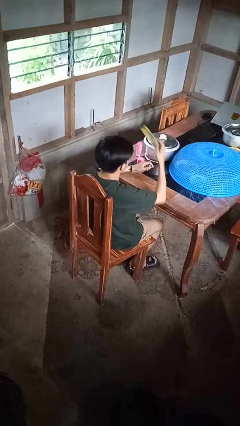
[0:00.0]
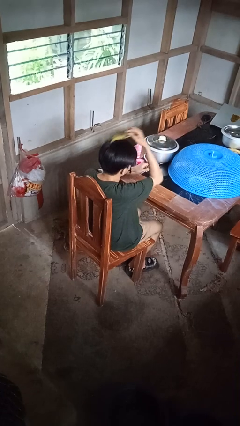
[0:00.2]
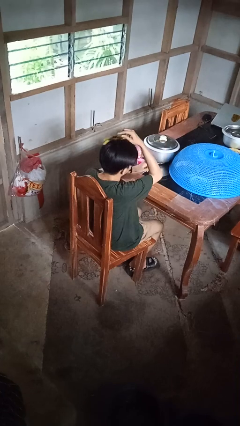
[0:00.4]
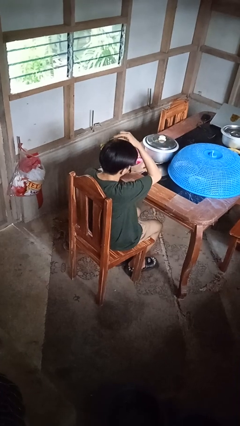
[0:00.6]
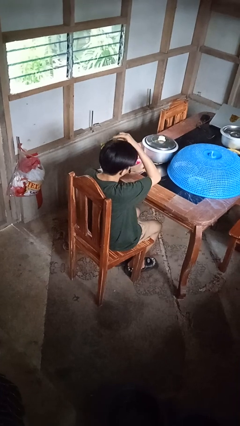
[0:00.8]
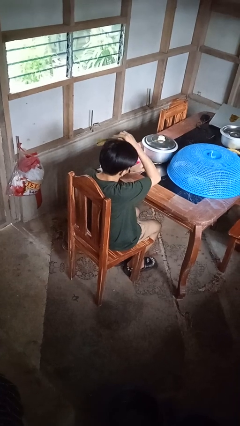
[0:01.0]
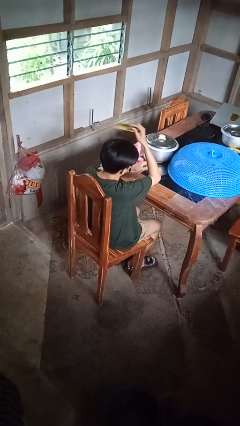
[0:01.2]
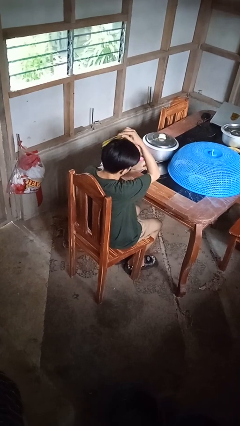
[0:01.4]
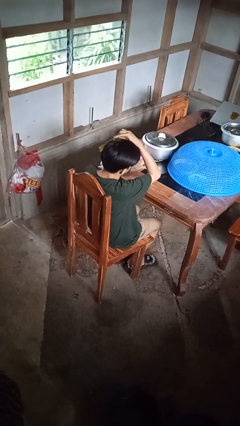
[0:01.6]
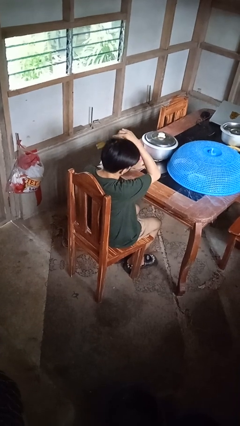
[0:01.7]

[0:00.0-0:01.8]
person brushes hair

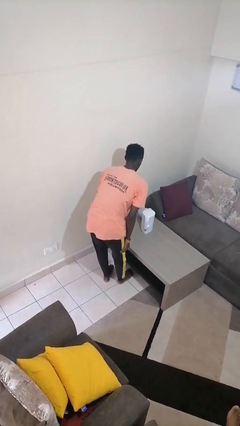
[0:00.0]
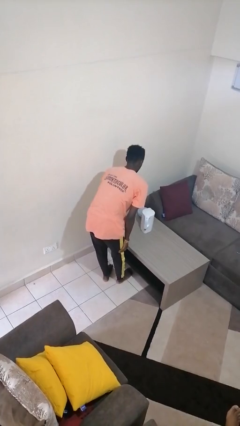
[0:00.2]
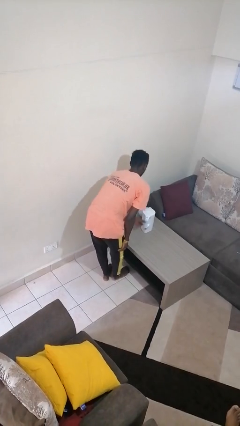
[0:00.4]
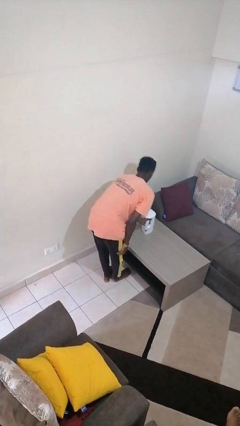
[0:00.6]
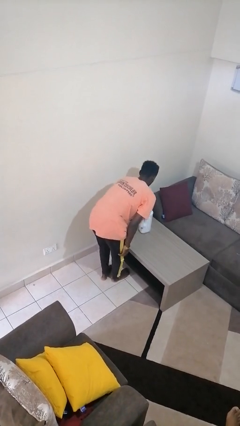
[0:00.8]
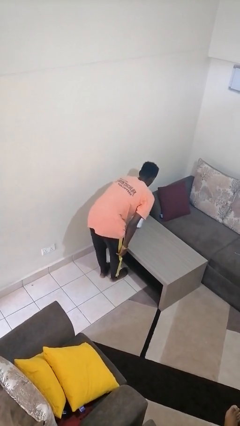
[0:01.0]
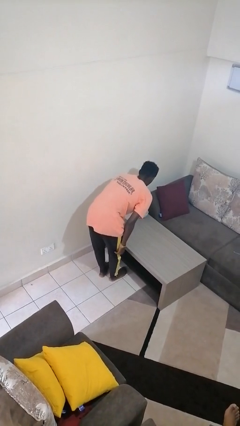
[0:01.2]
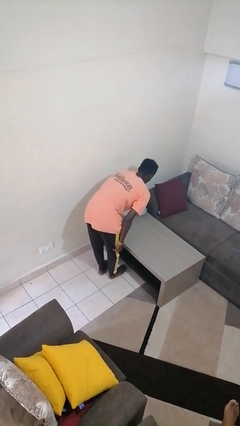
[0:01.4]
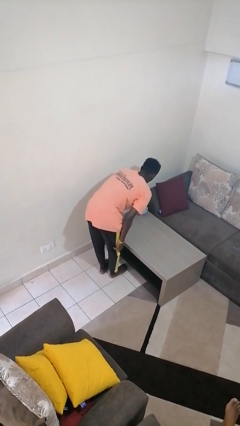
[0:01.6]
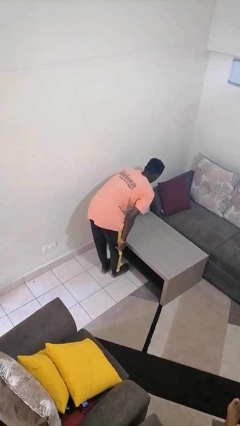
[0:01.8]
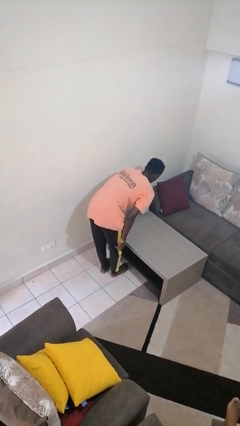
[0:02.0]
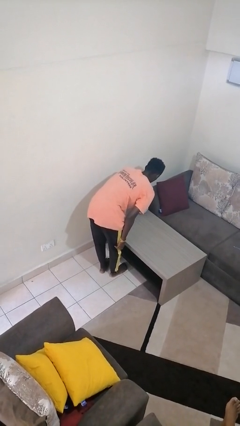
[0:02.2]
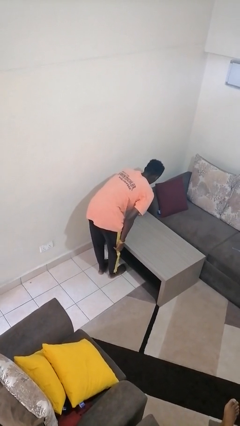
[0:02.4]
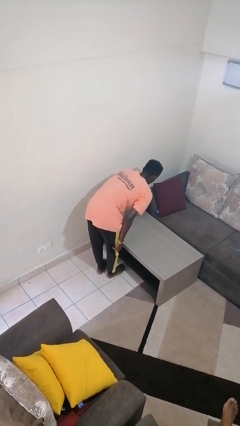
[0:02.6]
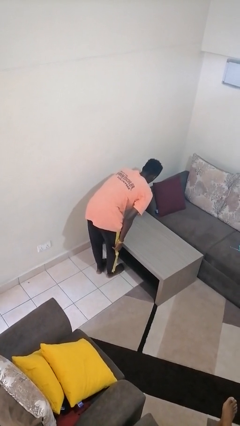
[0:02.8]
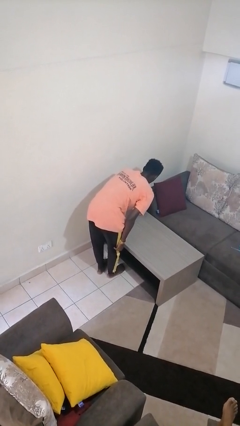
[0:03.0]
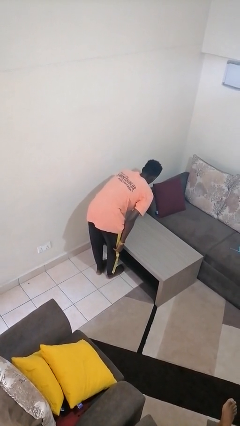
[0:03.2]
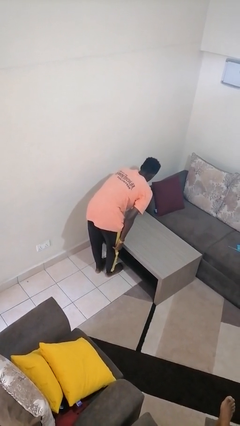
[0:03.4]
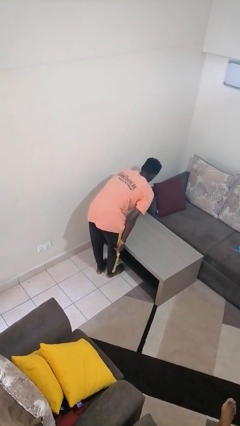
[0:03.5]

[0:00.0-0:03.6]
person pours into bowl

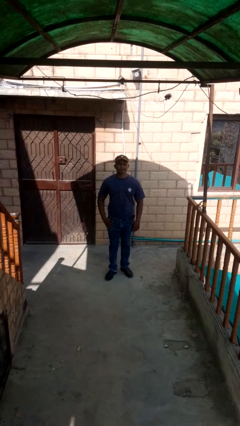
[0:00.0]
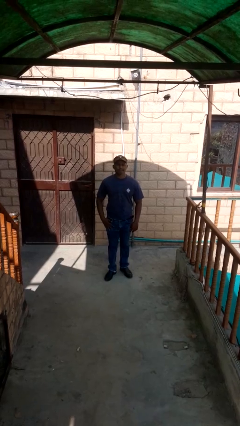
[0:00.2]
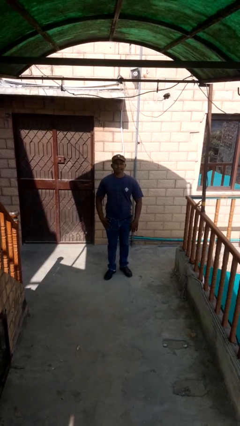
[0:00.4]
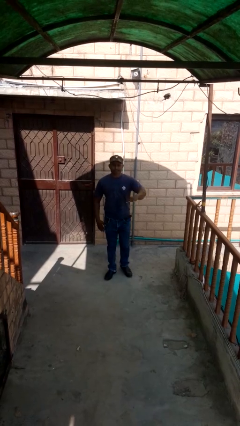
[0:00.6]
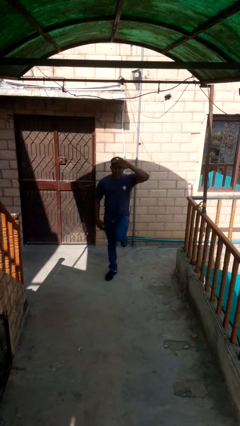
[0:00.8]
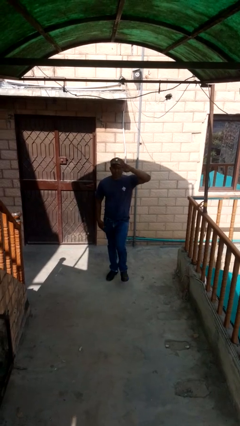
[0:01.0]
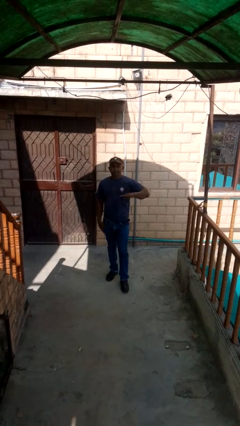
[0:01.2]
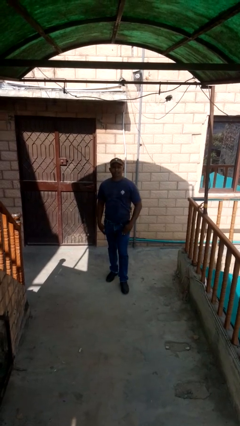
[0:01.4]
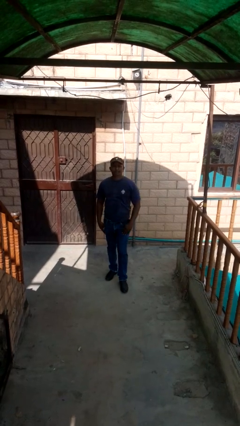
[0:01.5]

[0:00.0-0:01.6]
person salutes

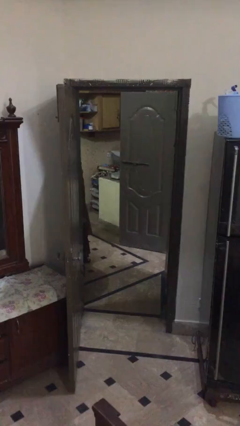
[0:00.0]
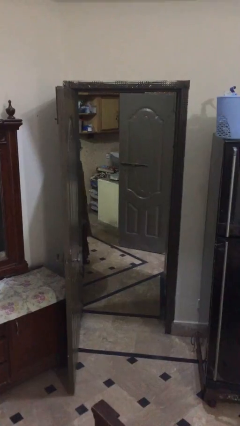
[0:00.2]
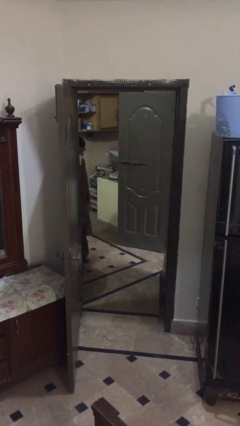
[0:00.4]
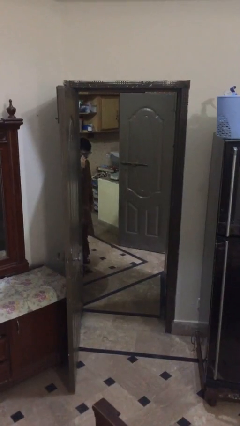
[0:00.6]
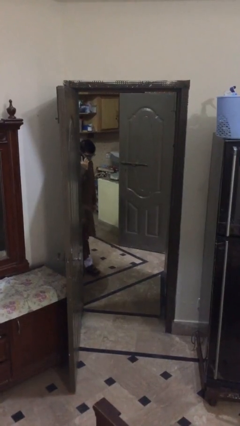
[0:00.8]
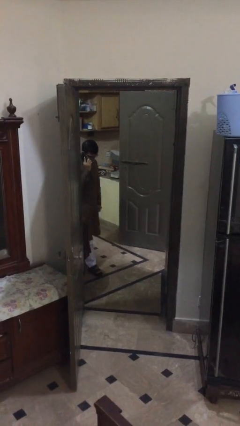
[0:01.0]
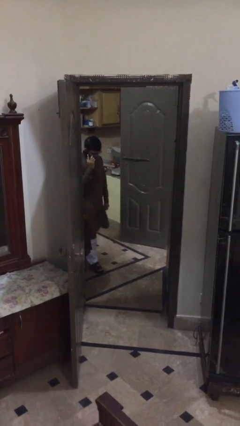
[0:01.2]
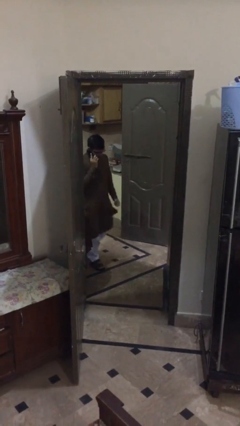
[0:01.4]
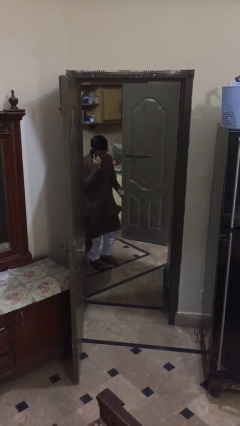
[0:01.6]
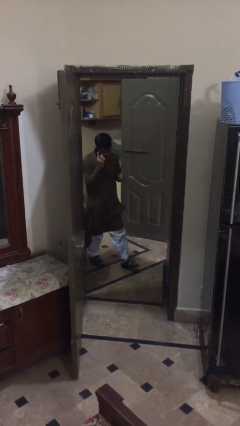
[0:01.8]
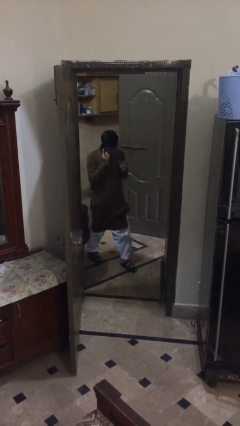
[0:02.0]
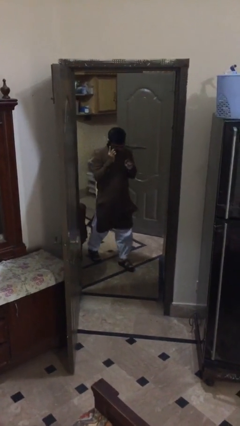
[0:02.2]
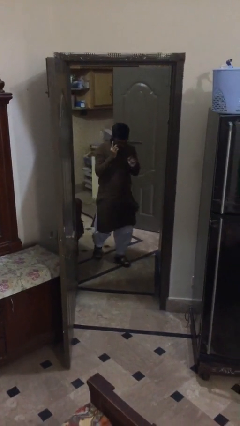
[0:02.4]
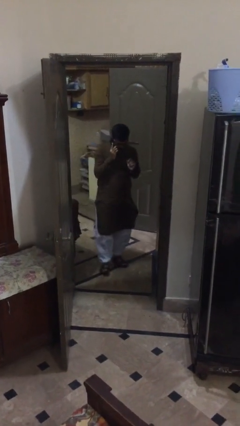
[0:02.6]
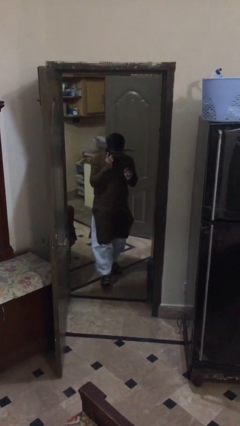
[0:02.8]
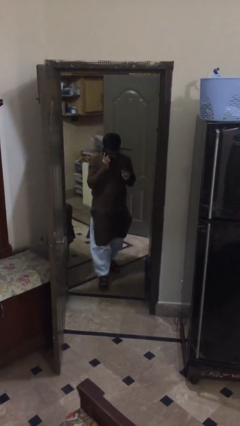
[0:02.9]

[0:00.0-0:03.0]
person enters scene through structure

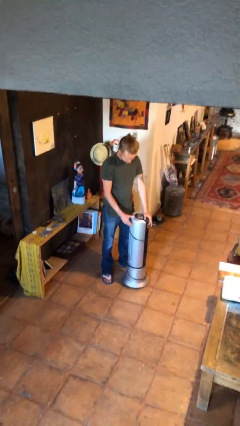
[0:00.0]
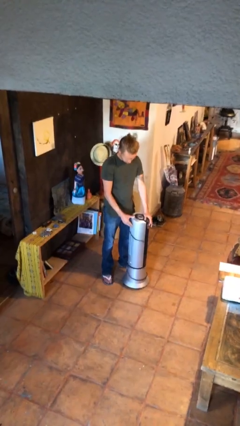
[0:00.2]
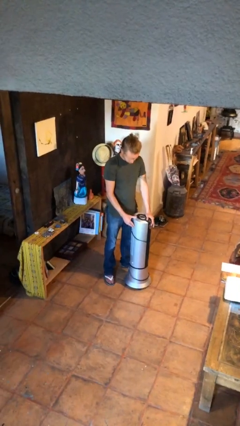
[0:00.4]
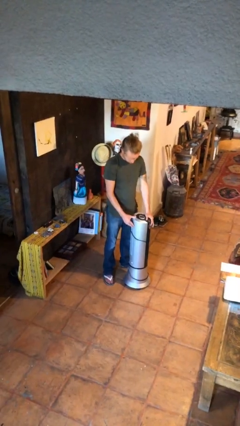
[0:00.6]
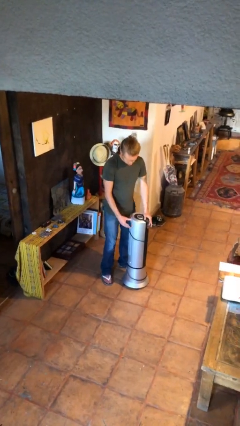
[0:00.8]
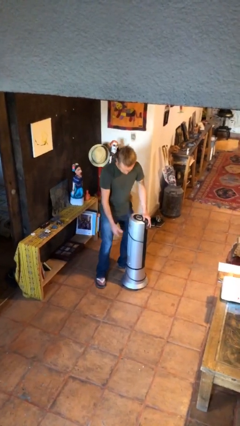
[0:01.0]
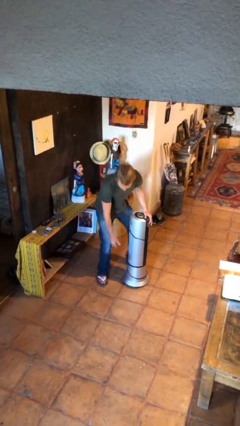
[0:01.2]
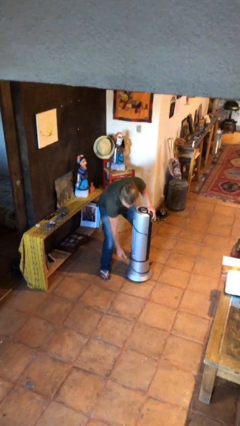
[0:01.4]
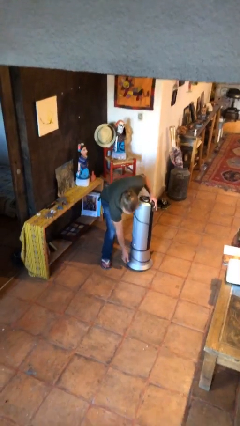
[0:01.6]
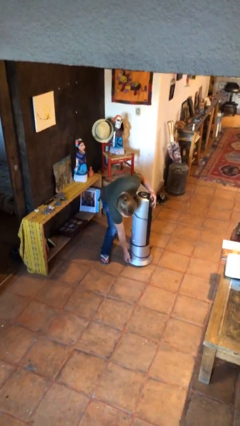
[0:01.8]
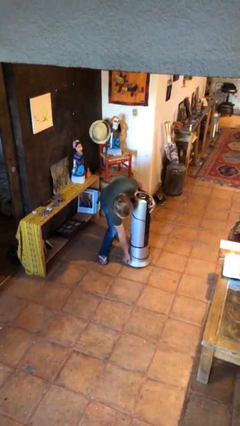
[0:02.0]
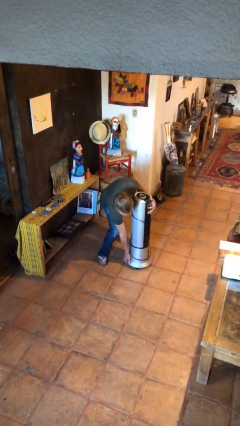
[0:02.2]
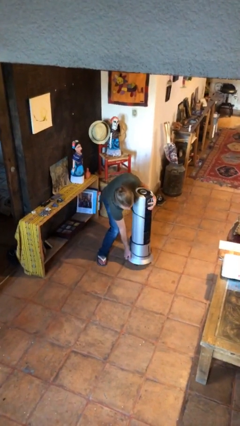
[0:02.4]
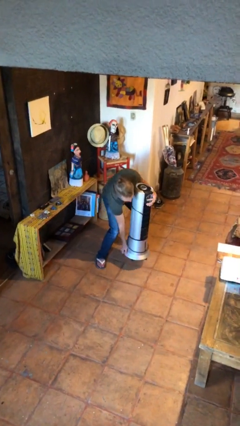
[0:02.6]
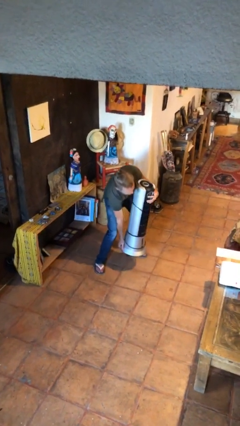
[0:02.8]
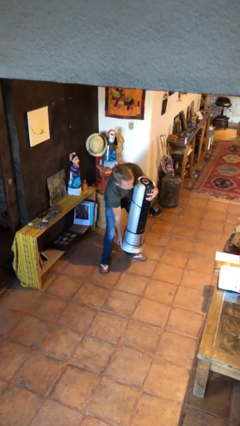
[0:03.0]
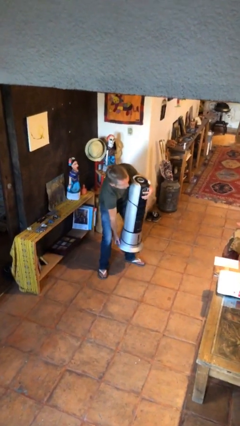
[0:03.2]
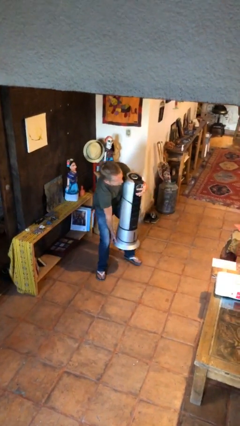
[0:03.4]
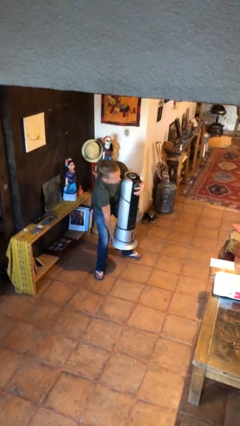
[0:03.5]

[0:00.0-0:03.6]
person picks up object from floor

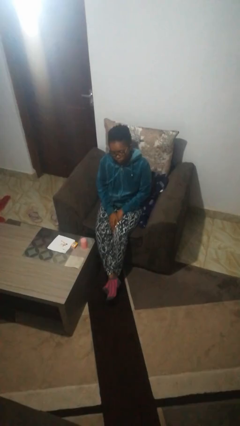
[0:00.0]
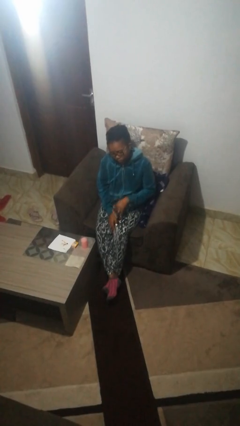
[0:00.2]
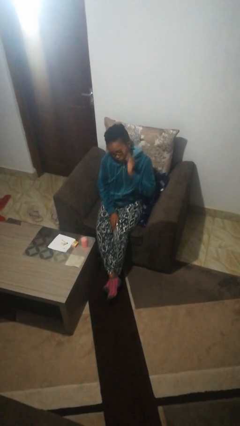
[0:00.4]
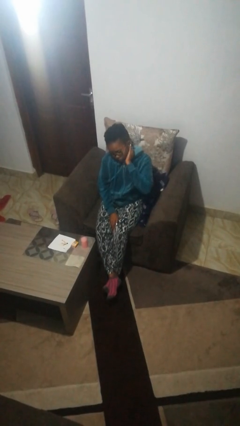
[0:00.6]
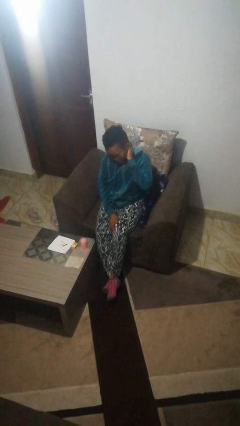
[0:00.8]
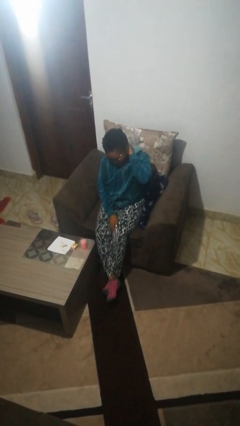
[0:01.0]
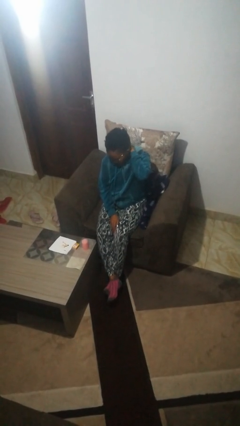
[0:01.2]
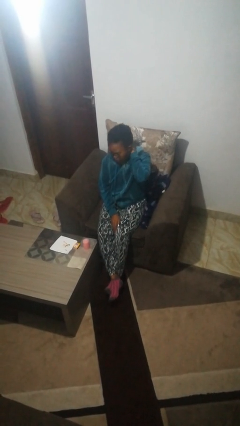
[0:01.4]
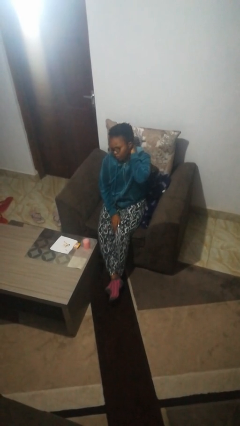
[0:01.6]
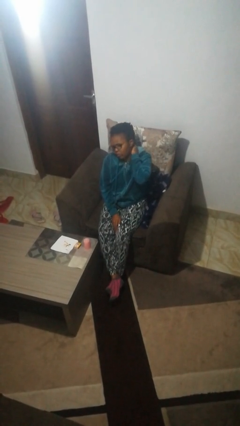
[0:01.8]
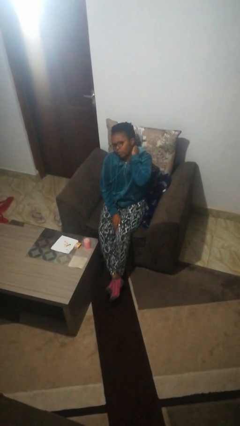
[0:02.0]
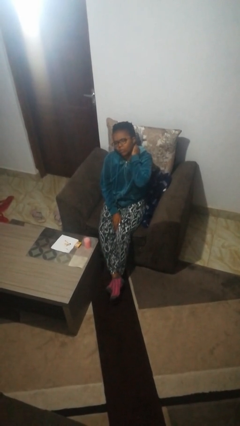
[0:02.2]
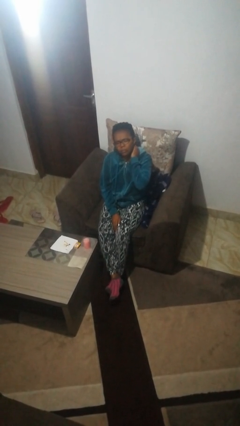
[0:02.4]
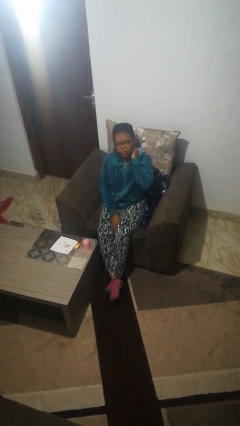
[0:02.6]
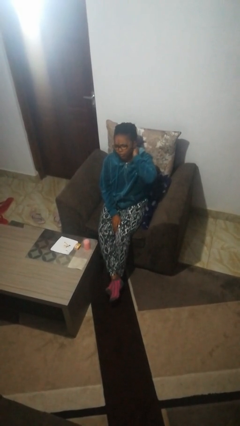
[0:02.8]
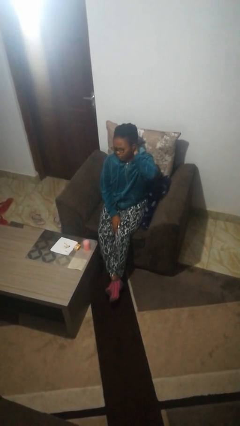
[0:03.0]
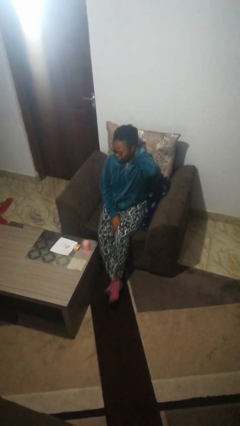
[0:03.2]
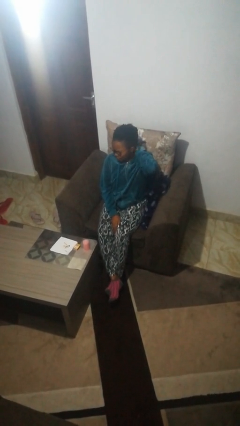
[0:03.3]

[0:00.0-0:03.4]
person rubs neck
